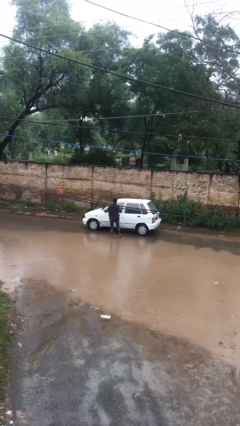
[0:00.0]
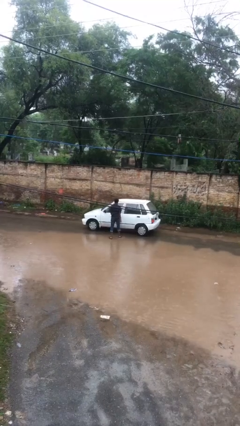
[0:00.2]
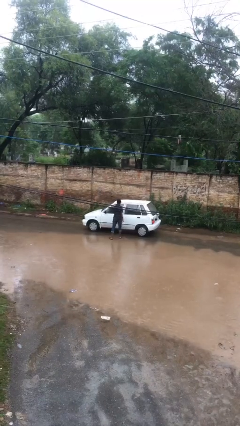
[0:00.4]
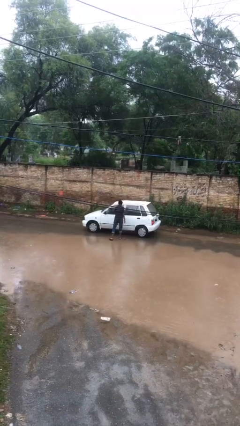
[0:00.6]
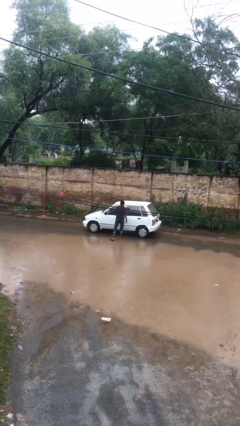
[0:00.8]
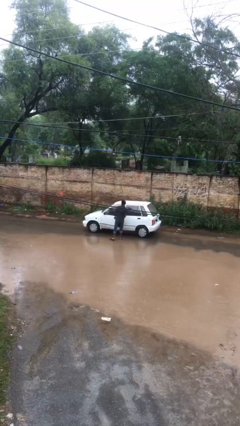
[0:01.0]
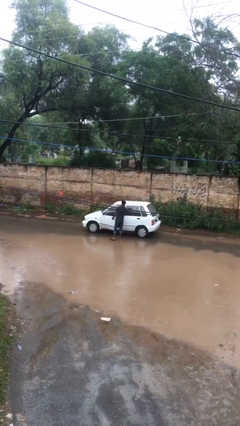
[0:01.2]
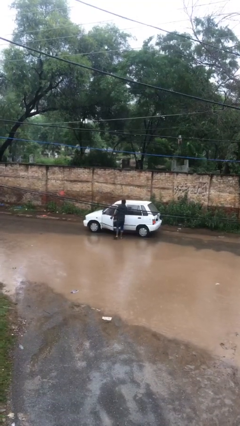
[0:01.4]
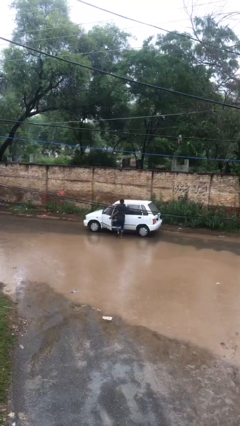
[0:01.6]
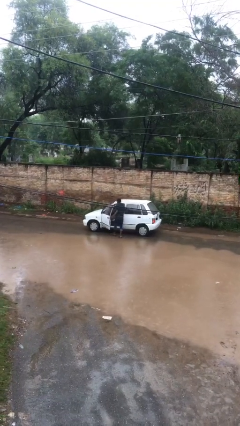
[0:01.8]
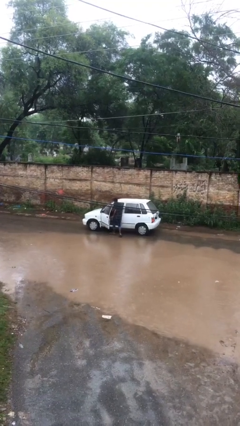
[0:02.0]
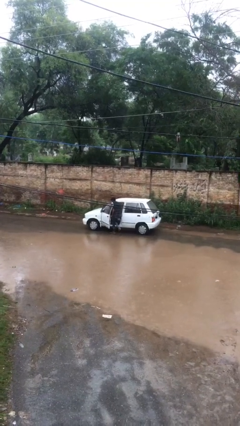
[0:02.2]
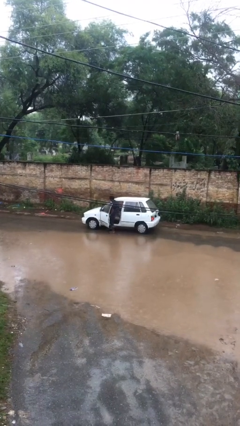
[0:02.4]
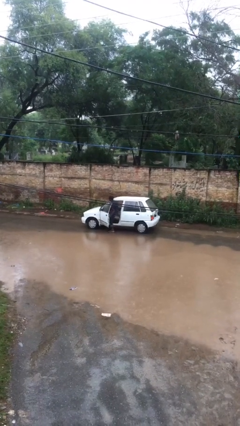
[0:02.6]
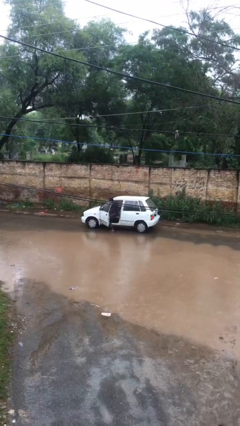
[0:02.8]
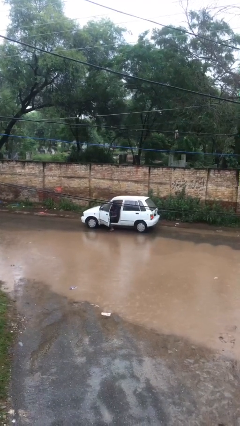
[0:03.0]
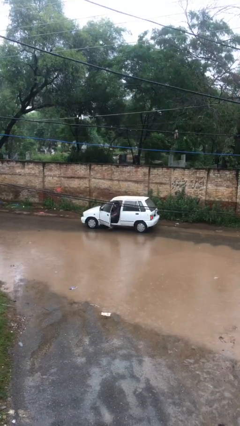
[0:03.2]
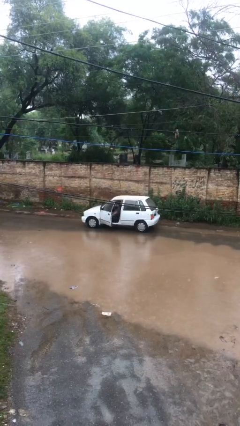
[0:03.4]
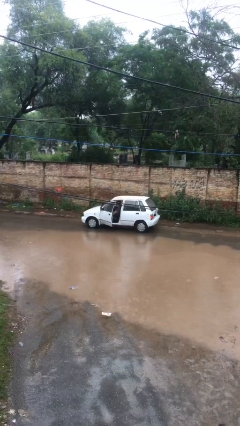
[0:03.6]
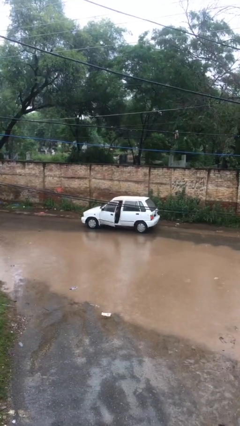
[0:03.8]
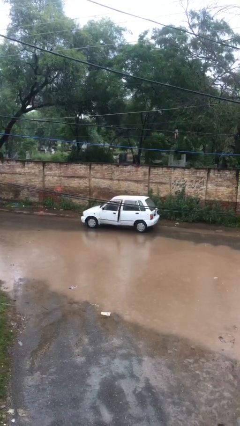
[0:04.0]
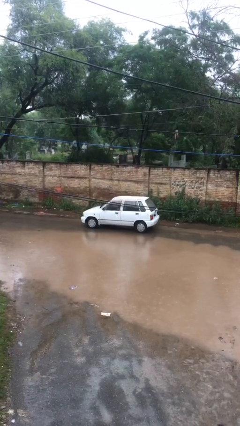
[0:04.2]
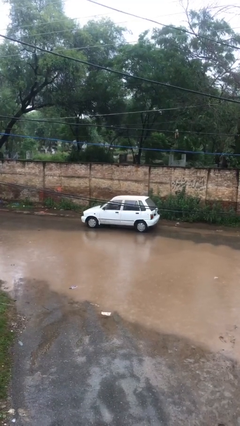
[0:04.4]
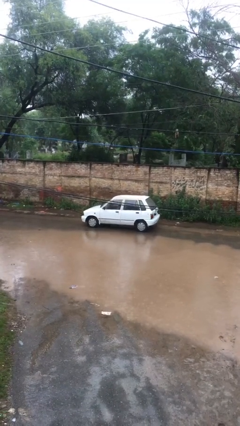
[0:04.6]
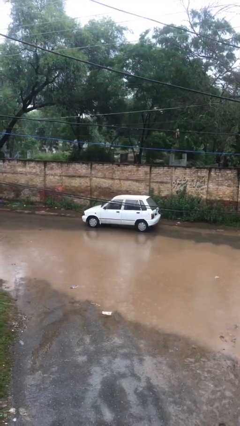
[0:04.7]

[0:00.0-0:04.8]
car picks up person

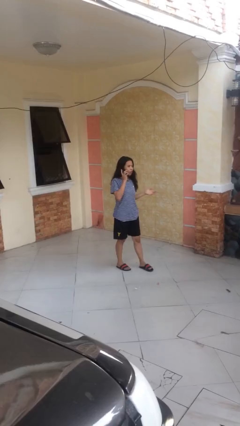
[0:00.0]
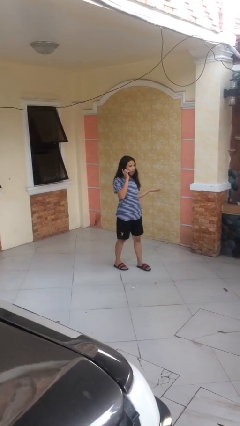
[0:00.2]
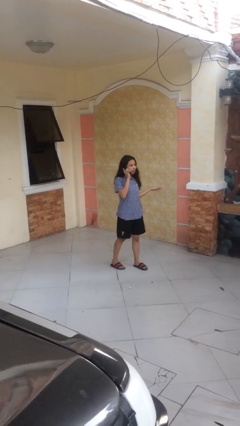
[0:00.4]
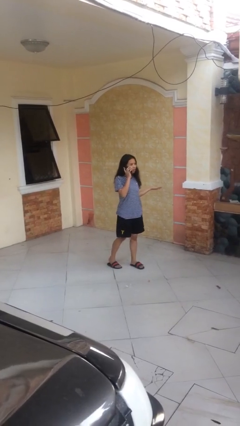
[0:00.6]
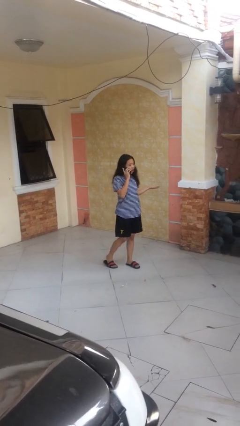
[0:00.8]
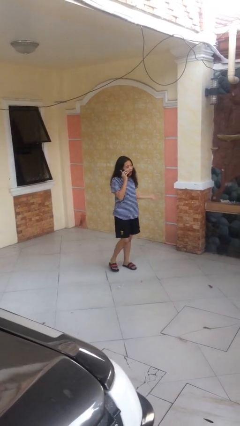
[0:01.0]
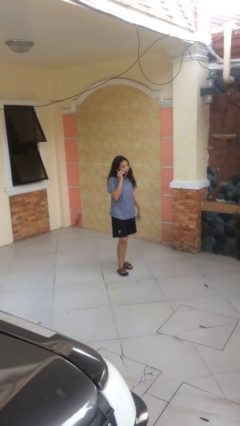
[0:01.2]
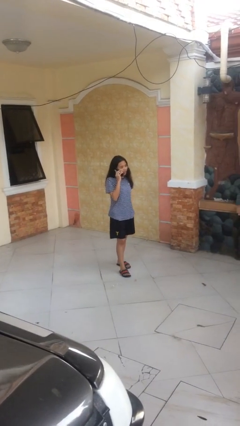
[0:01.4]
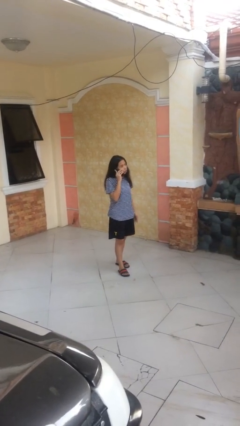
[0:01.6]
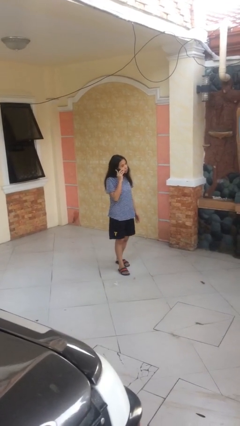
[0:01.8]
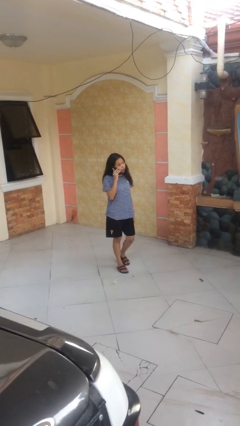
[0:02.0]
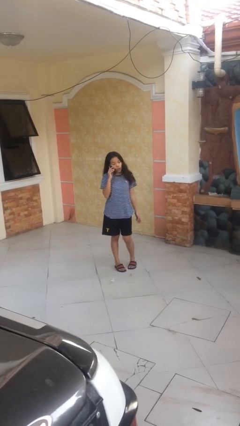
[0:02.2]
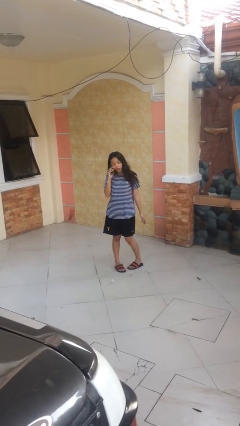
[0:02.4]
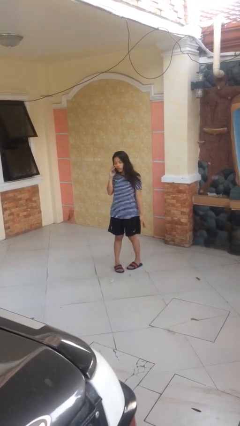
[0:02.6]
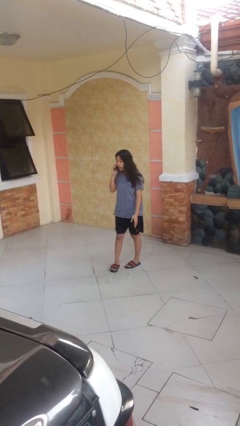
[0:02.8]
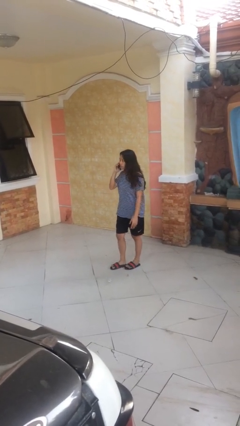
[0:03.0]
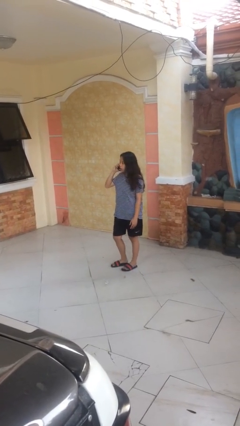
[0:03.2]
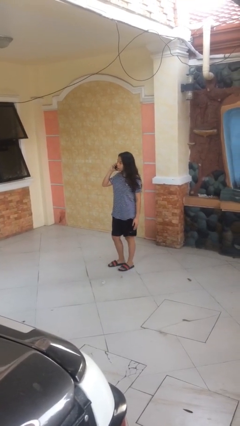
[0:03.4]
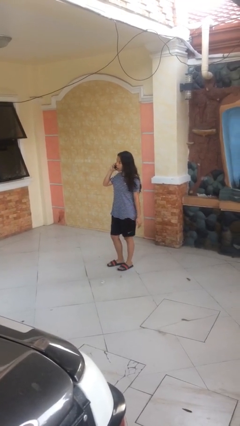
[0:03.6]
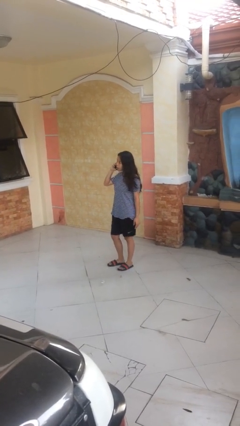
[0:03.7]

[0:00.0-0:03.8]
person talks on phone

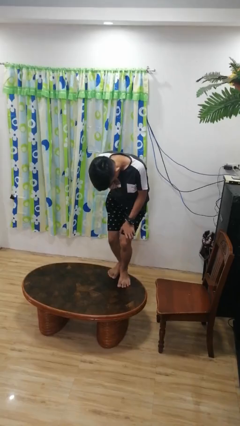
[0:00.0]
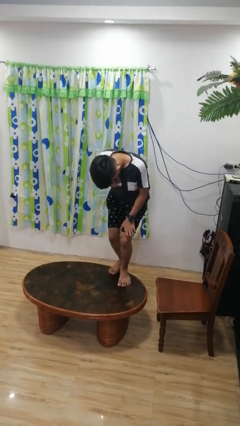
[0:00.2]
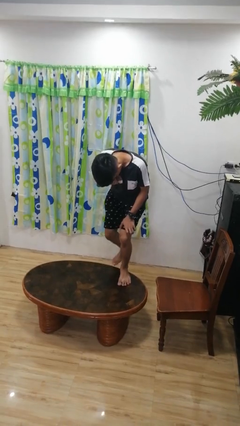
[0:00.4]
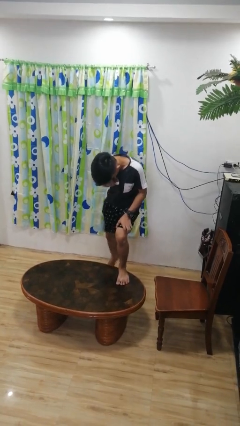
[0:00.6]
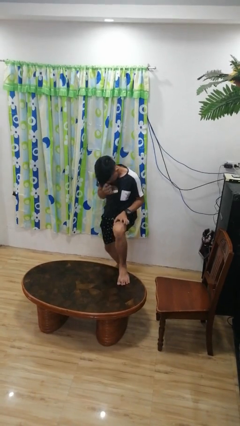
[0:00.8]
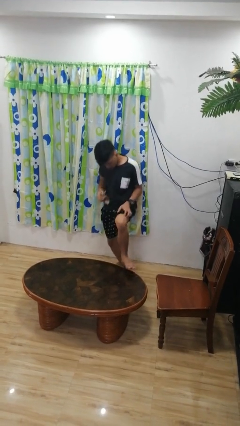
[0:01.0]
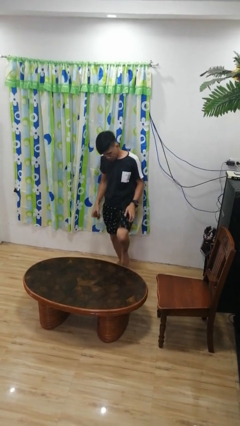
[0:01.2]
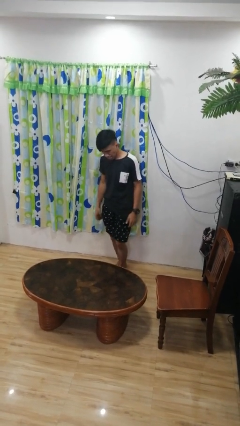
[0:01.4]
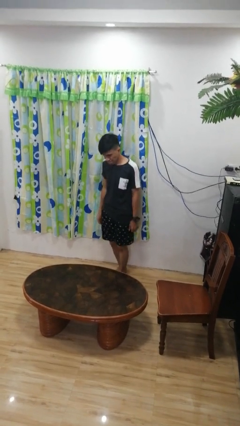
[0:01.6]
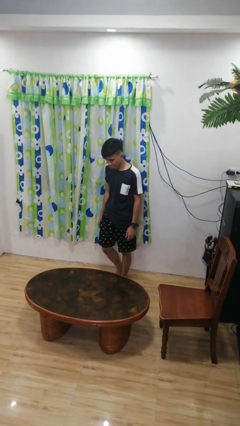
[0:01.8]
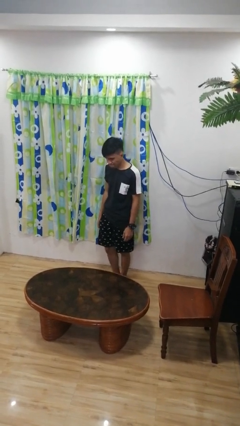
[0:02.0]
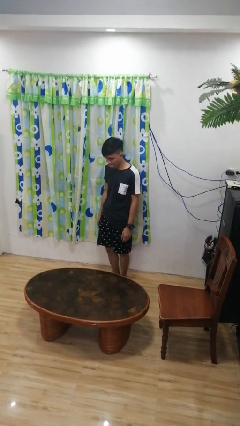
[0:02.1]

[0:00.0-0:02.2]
person climbs off table

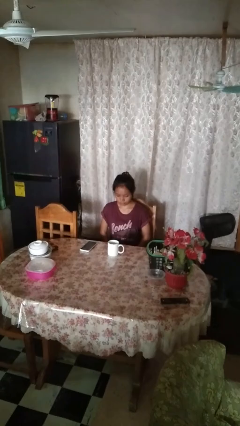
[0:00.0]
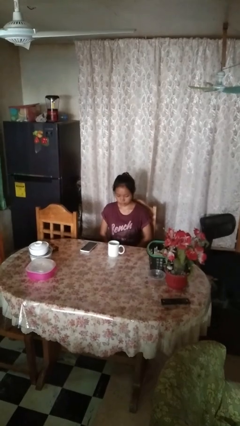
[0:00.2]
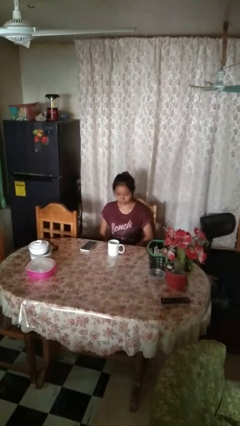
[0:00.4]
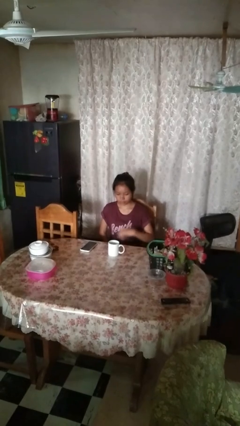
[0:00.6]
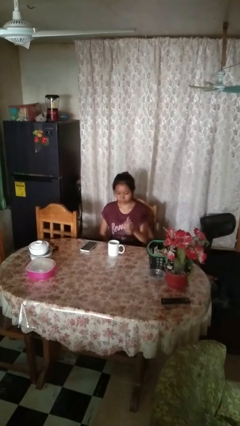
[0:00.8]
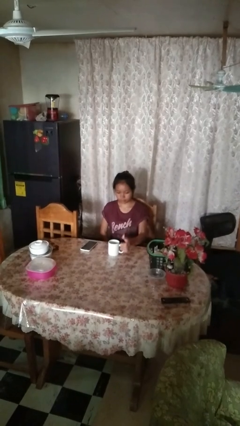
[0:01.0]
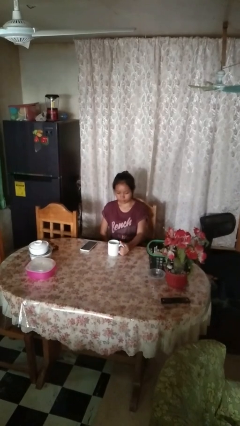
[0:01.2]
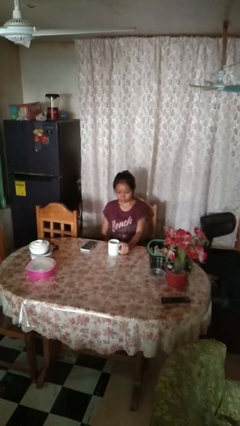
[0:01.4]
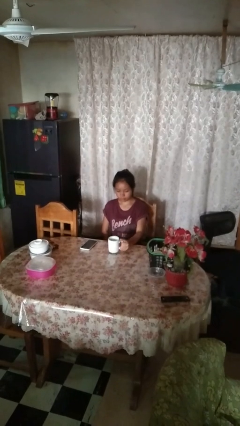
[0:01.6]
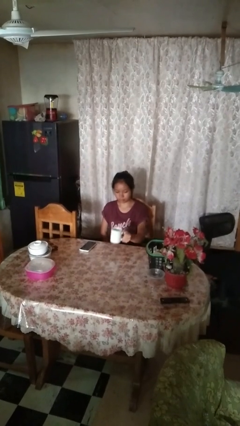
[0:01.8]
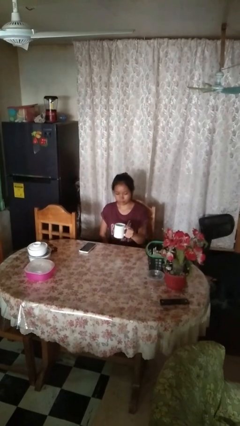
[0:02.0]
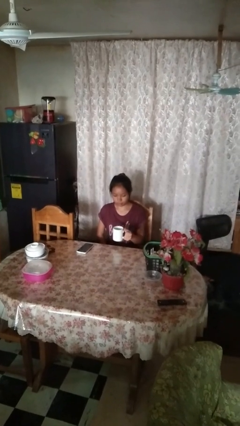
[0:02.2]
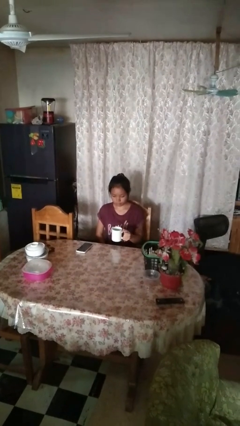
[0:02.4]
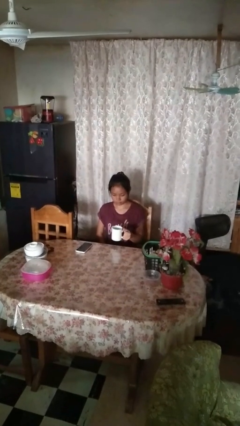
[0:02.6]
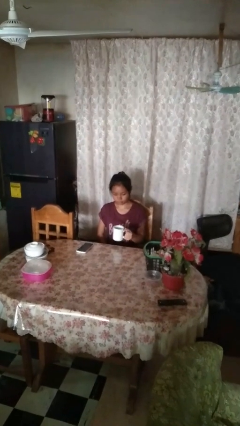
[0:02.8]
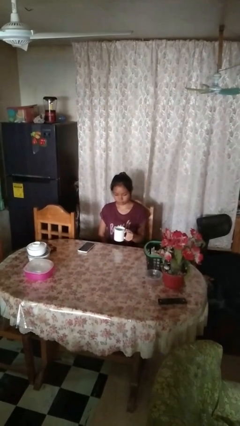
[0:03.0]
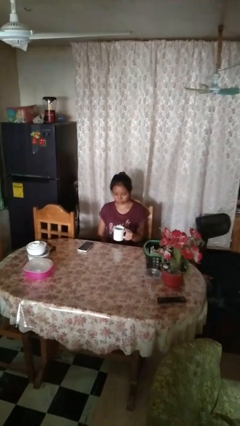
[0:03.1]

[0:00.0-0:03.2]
person picks up object from table

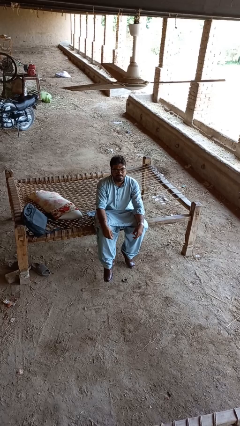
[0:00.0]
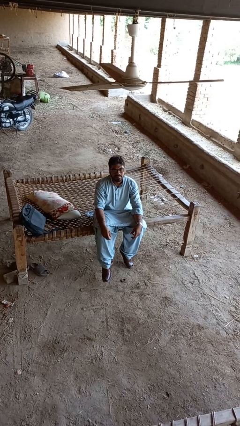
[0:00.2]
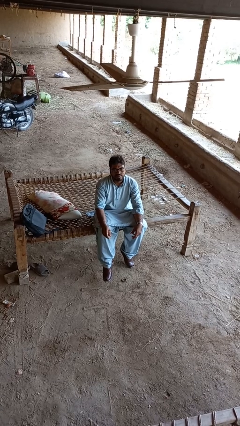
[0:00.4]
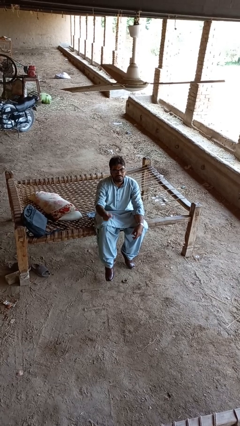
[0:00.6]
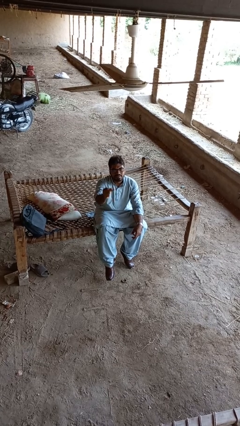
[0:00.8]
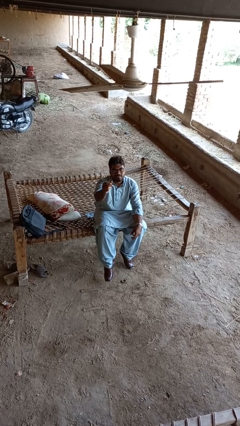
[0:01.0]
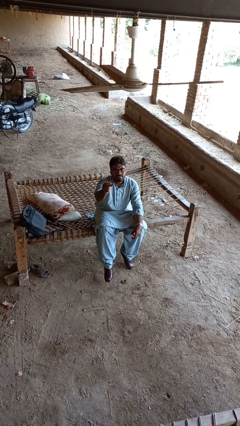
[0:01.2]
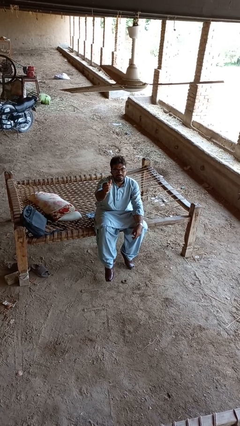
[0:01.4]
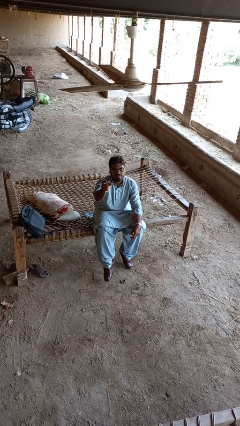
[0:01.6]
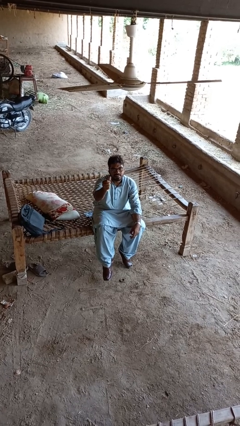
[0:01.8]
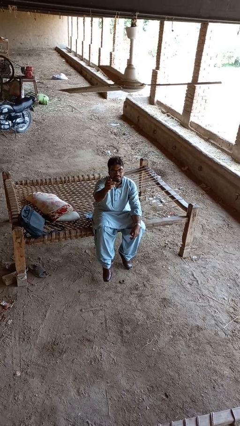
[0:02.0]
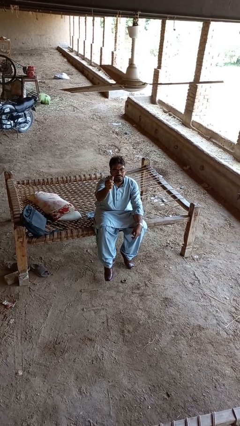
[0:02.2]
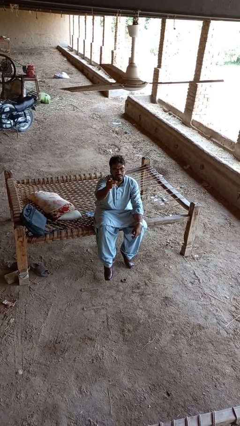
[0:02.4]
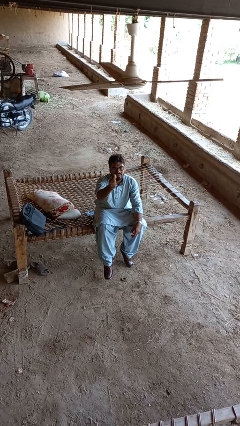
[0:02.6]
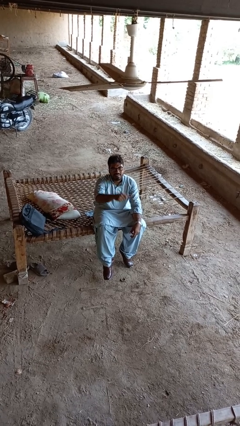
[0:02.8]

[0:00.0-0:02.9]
person snaps fingers
